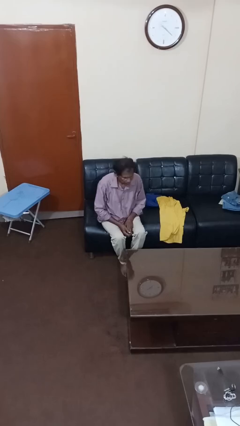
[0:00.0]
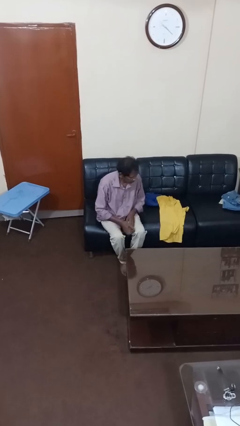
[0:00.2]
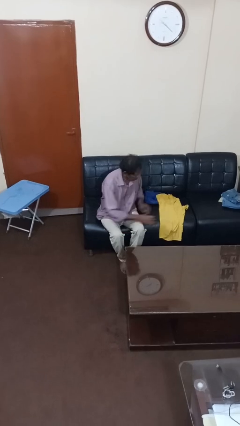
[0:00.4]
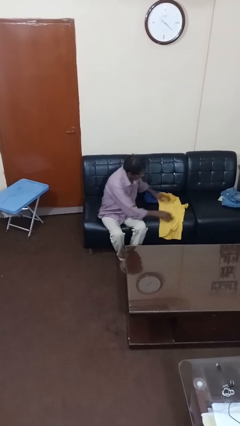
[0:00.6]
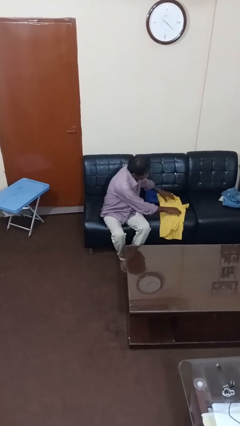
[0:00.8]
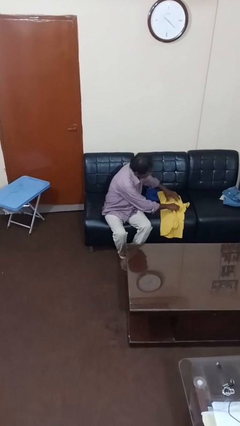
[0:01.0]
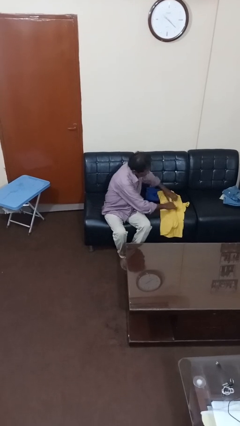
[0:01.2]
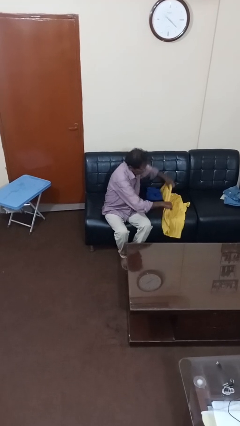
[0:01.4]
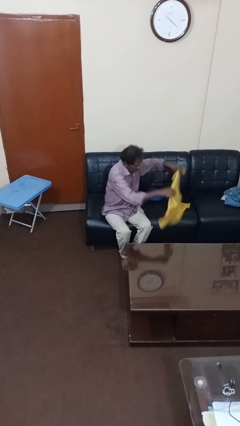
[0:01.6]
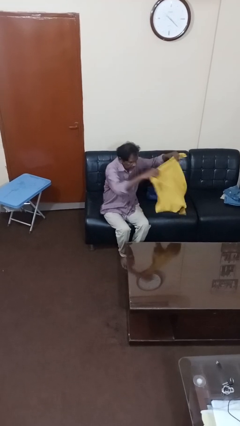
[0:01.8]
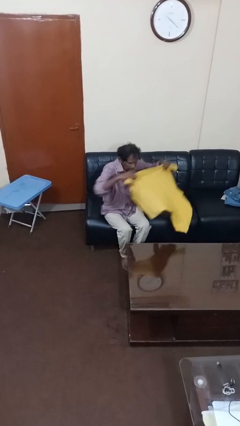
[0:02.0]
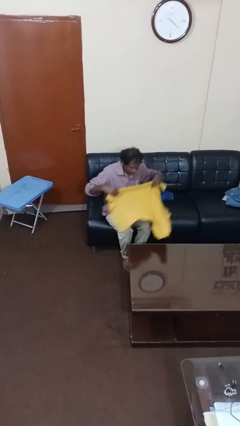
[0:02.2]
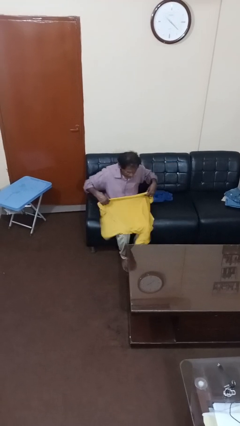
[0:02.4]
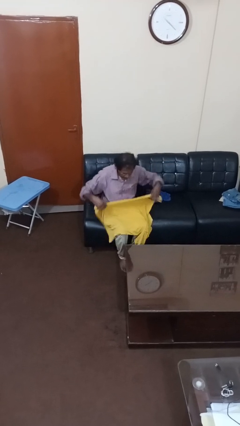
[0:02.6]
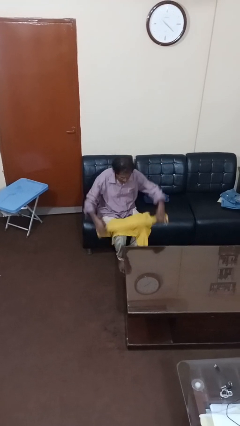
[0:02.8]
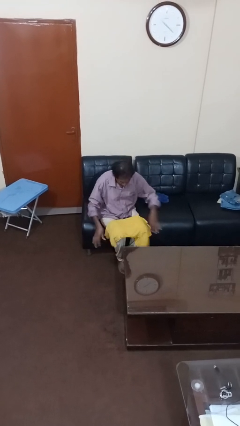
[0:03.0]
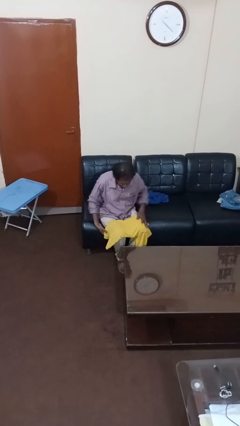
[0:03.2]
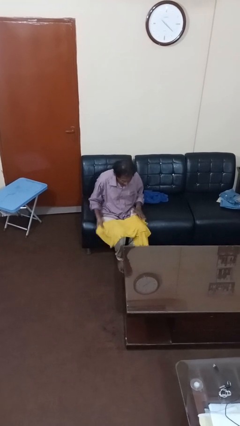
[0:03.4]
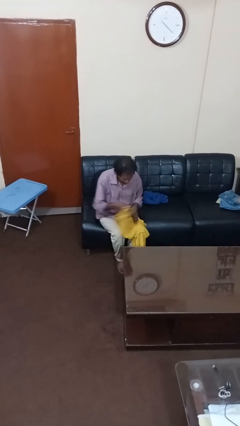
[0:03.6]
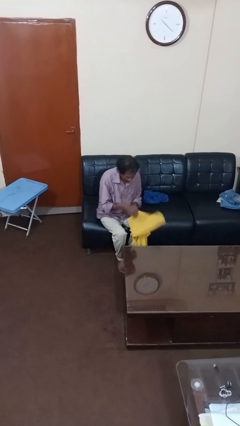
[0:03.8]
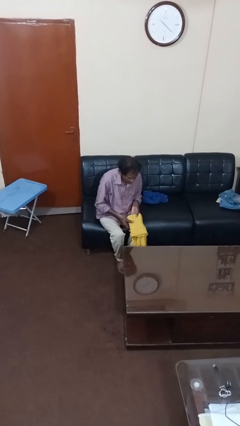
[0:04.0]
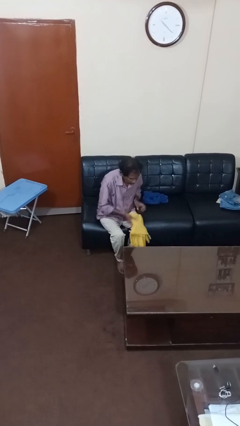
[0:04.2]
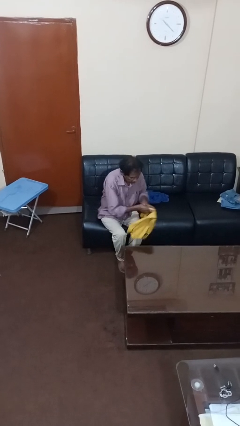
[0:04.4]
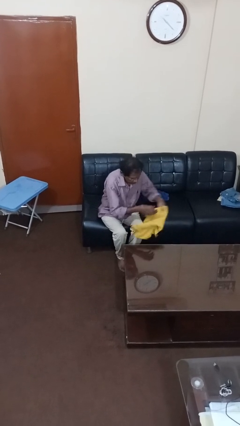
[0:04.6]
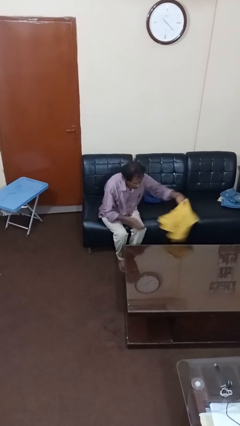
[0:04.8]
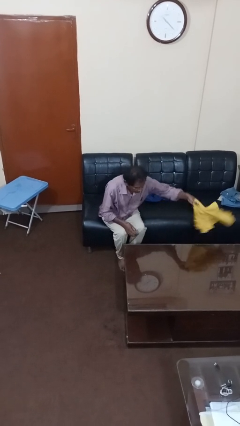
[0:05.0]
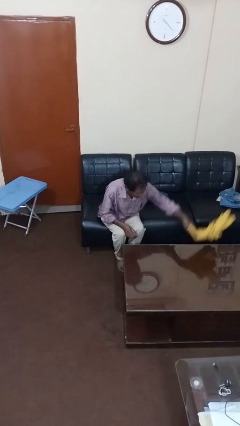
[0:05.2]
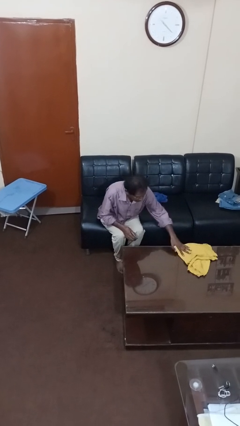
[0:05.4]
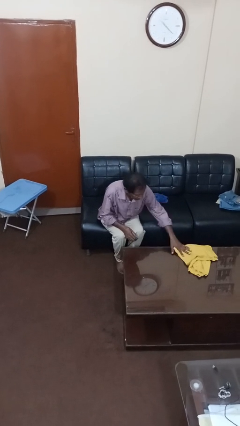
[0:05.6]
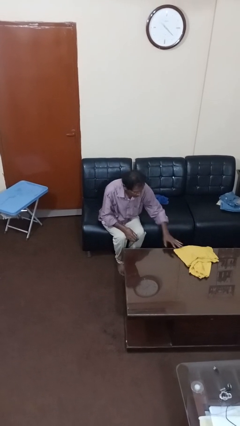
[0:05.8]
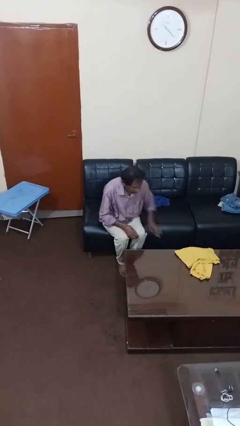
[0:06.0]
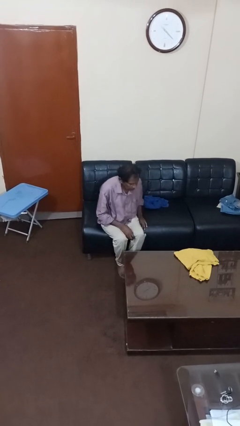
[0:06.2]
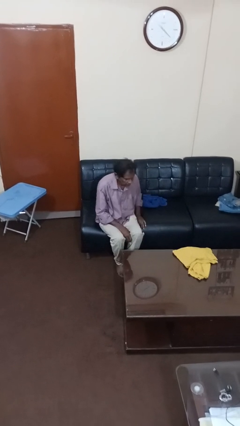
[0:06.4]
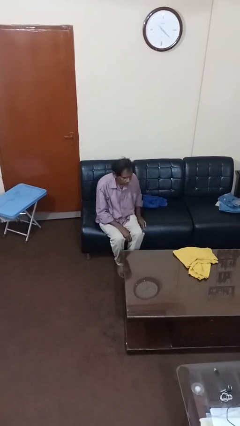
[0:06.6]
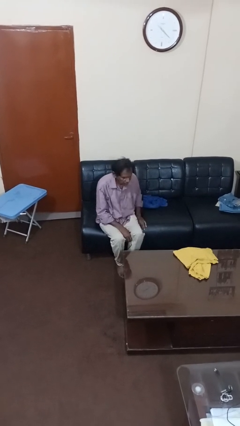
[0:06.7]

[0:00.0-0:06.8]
person folds shirt

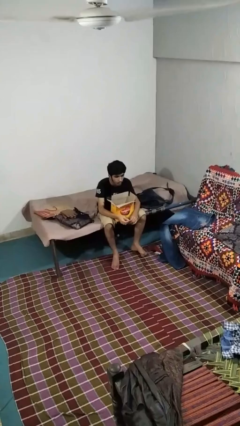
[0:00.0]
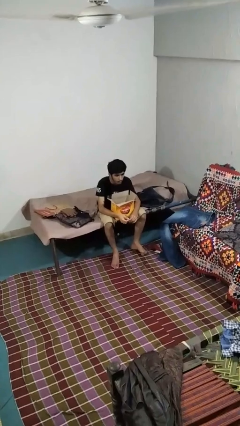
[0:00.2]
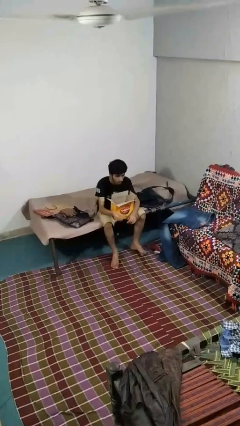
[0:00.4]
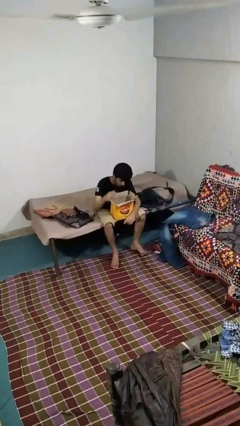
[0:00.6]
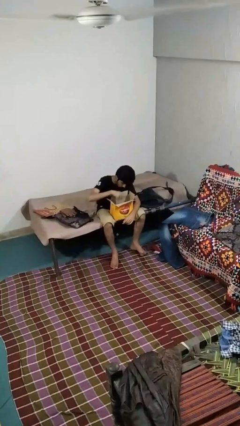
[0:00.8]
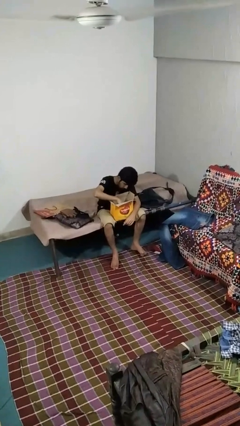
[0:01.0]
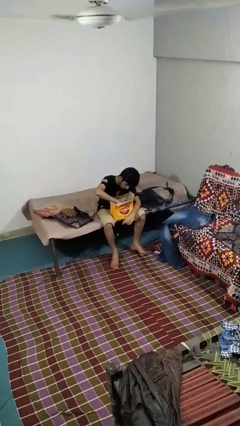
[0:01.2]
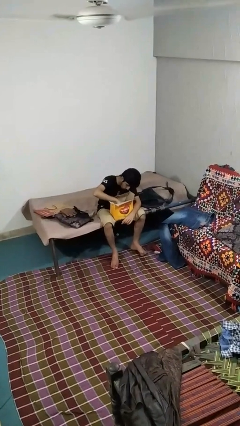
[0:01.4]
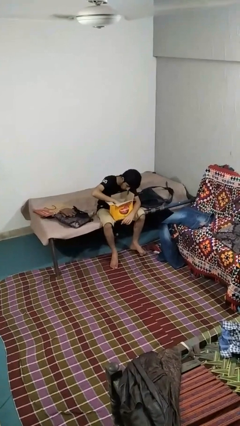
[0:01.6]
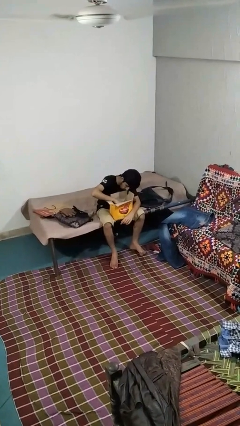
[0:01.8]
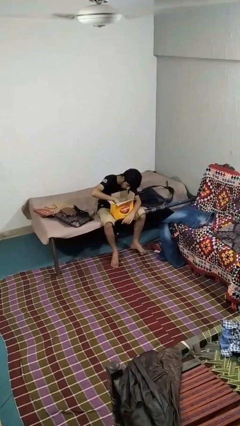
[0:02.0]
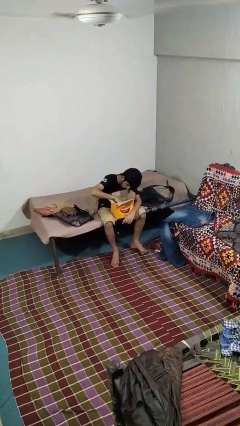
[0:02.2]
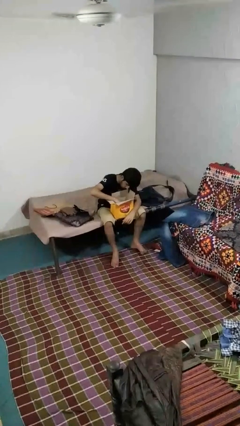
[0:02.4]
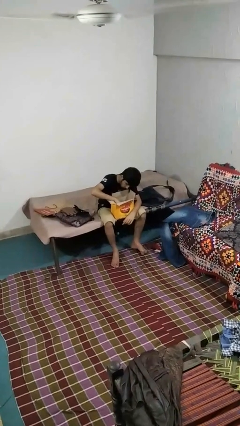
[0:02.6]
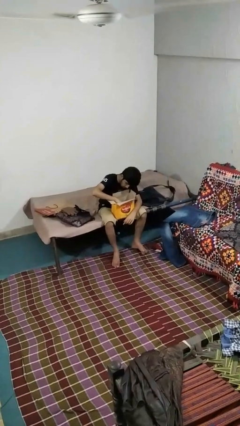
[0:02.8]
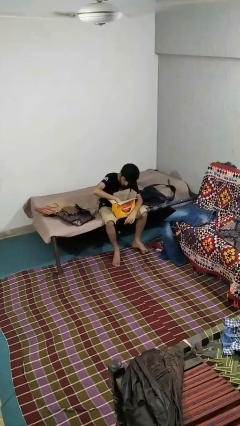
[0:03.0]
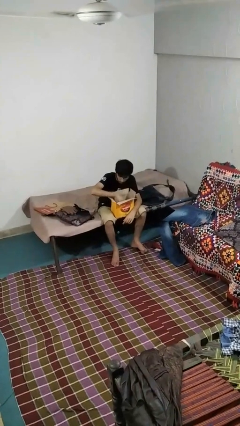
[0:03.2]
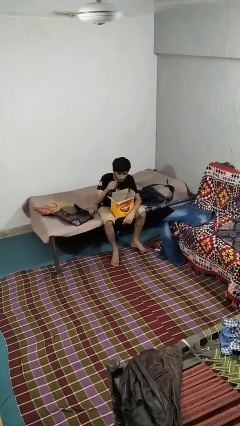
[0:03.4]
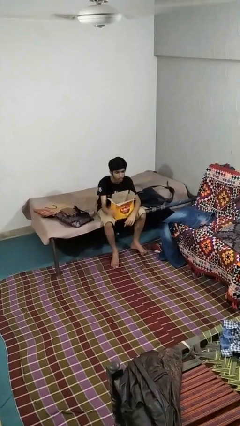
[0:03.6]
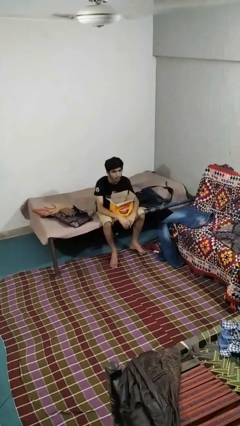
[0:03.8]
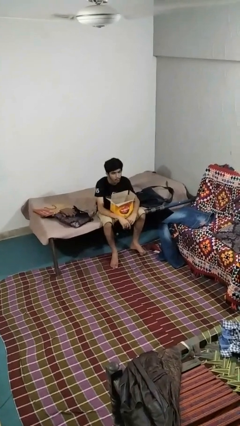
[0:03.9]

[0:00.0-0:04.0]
person searches in box

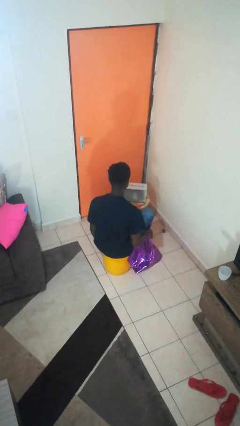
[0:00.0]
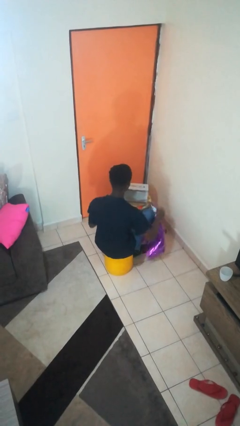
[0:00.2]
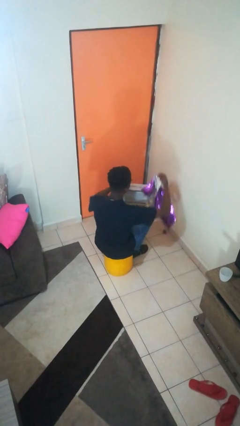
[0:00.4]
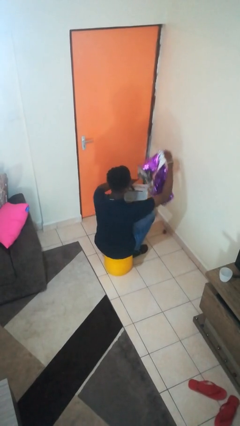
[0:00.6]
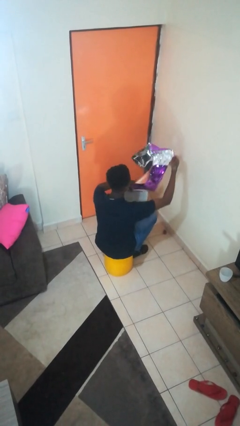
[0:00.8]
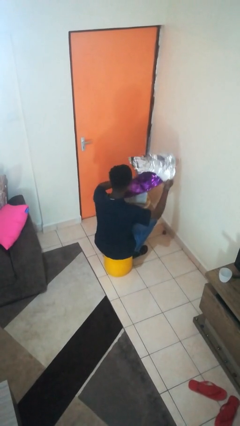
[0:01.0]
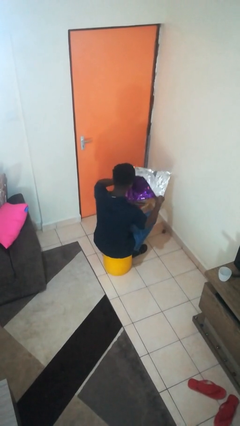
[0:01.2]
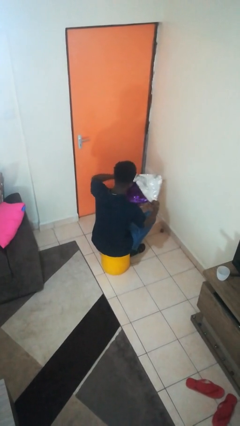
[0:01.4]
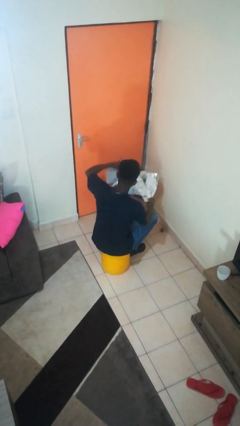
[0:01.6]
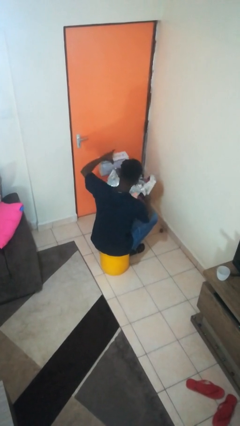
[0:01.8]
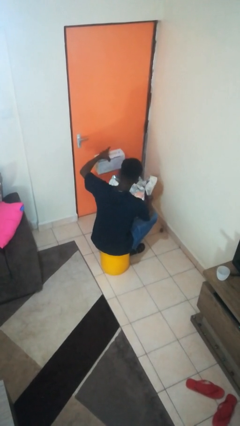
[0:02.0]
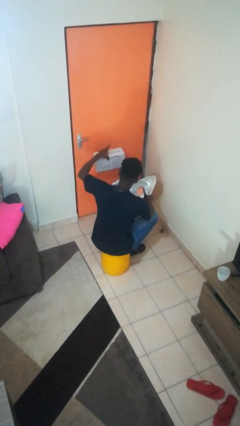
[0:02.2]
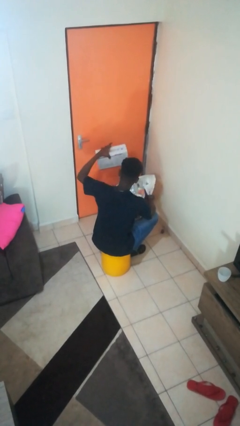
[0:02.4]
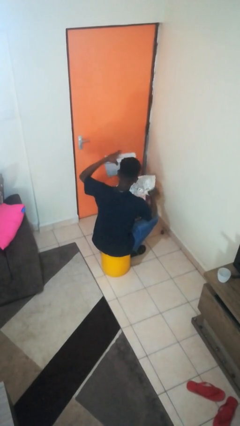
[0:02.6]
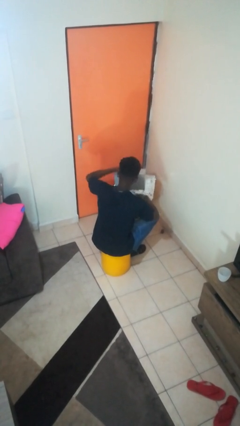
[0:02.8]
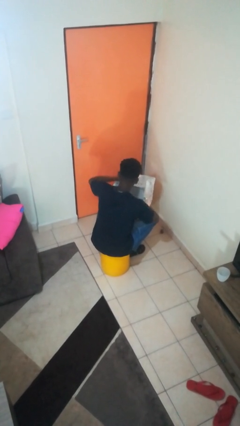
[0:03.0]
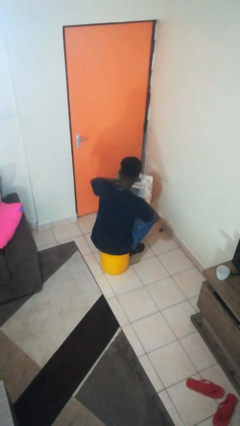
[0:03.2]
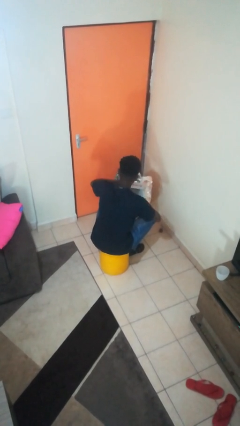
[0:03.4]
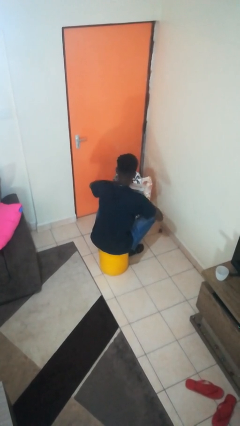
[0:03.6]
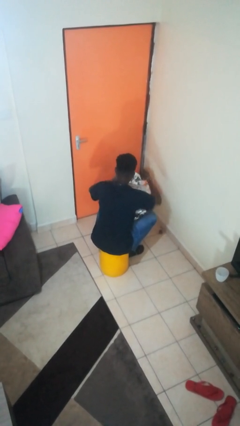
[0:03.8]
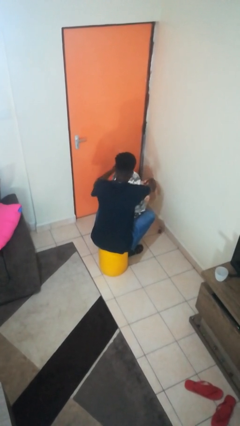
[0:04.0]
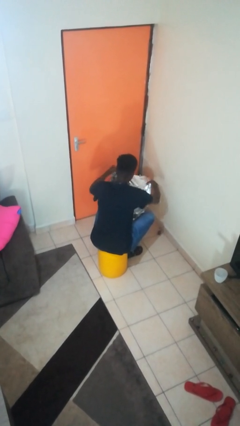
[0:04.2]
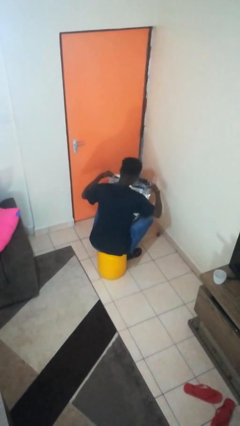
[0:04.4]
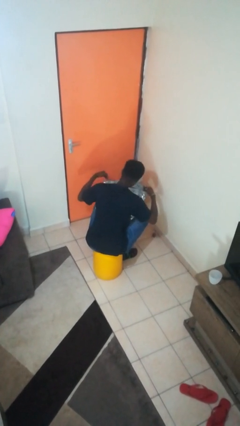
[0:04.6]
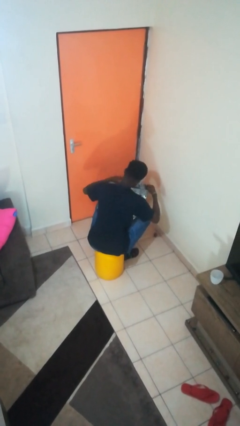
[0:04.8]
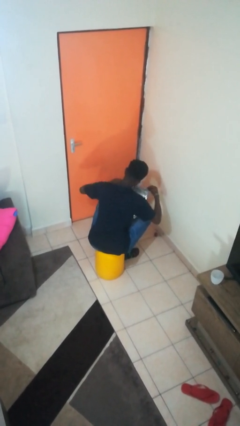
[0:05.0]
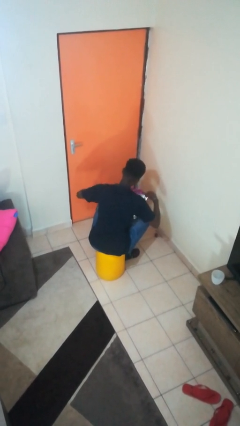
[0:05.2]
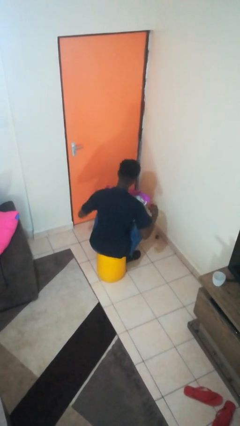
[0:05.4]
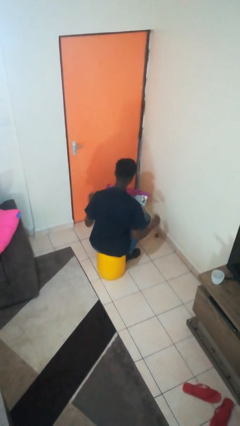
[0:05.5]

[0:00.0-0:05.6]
person wraps box

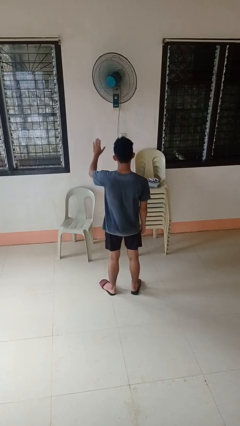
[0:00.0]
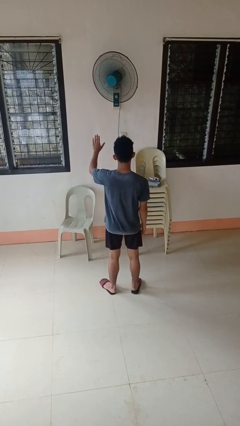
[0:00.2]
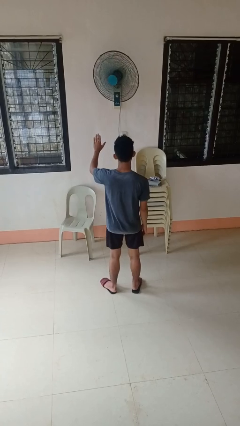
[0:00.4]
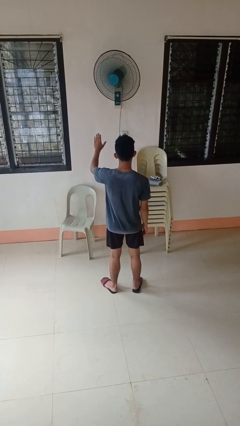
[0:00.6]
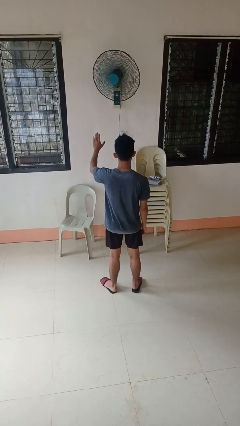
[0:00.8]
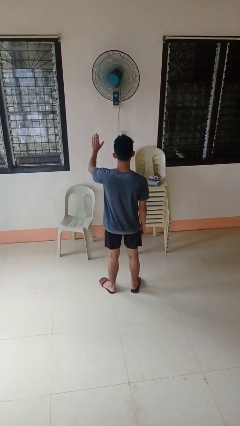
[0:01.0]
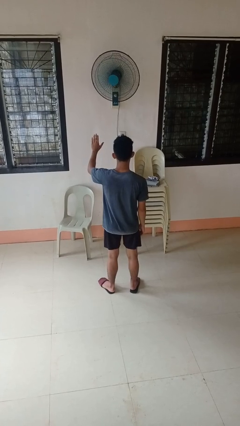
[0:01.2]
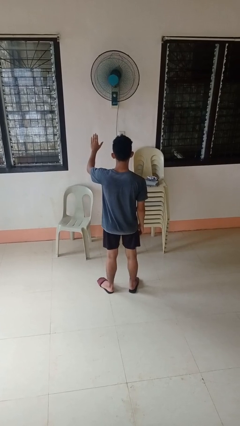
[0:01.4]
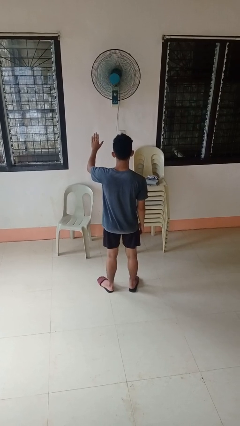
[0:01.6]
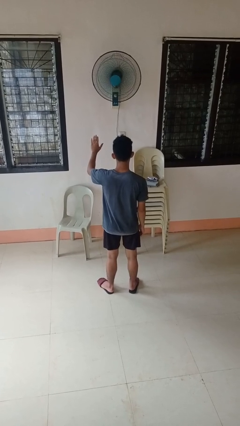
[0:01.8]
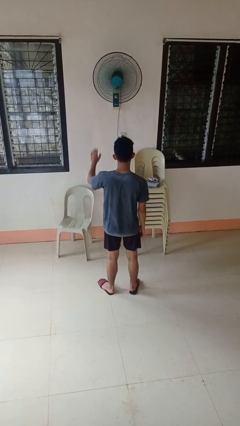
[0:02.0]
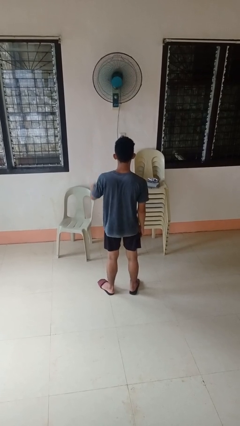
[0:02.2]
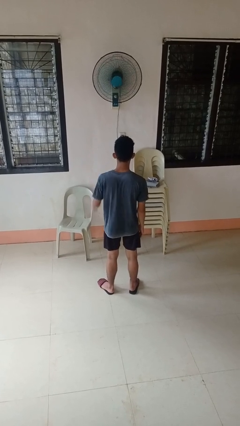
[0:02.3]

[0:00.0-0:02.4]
person gestures stop
